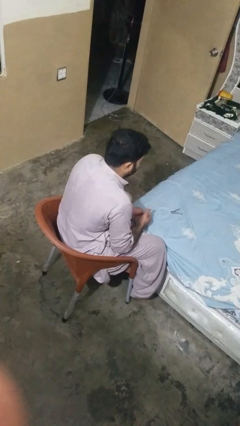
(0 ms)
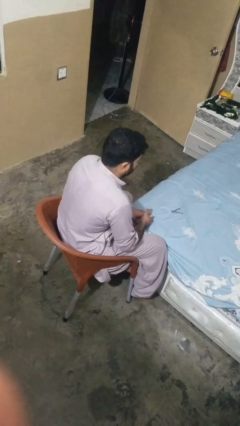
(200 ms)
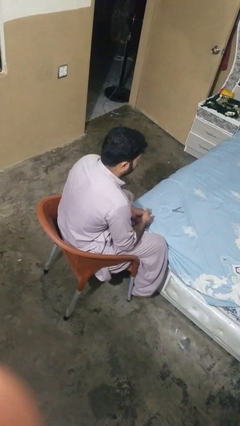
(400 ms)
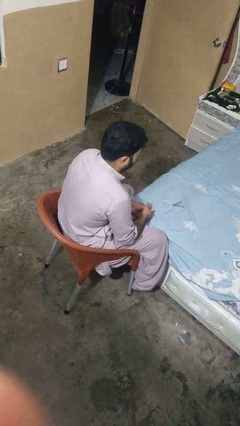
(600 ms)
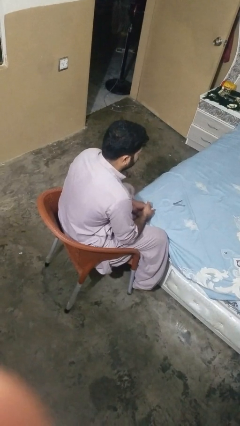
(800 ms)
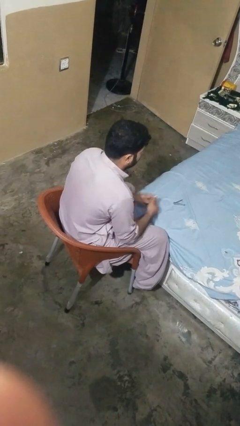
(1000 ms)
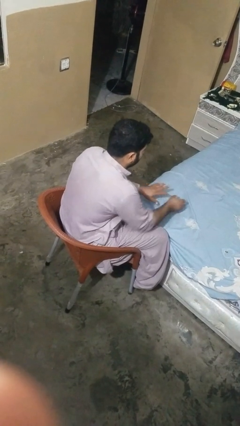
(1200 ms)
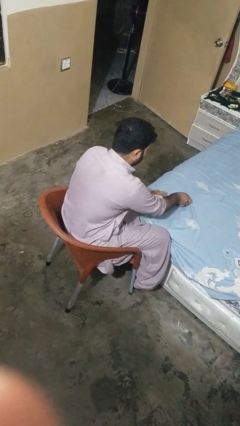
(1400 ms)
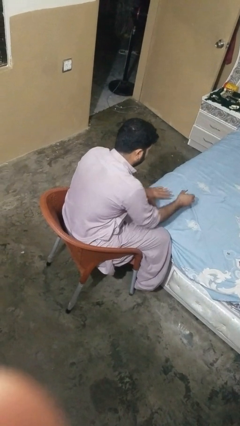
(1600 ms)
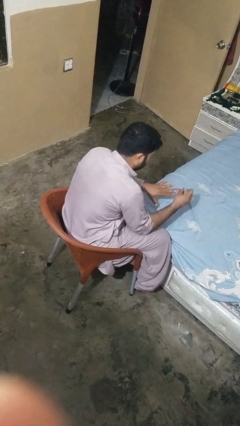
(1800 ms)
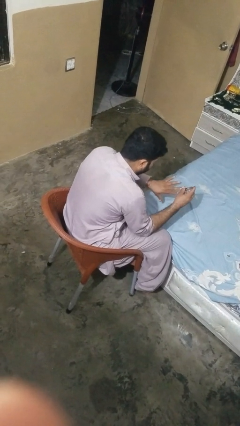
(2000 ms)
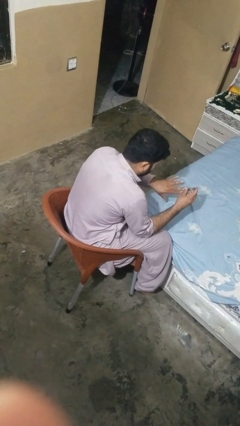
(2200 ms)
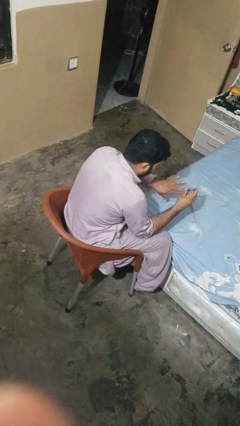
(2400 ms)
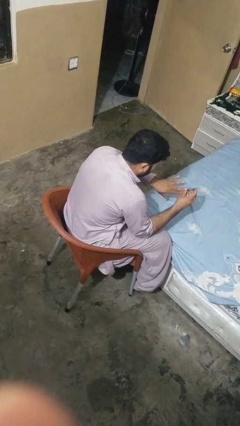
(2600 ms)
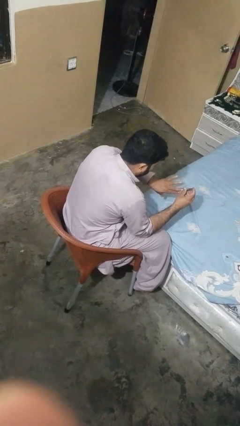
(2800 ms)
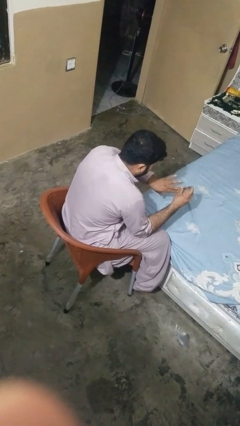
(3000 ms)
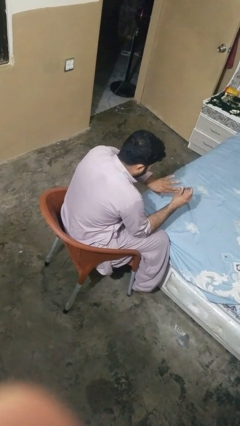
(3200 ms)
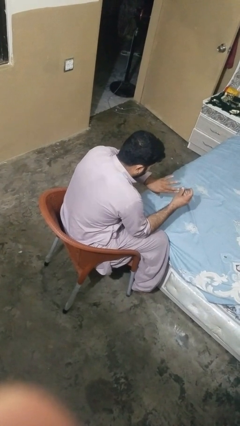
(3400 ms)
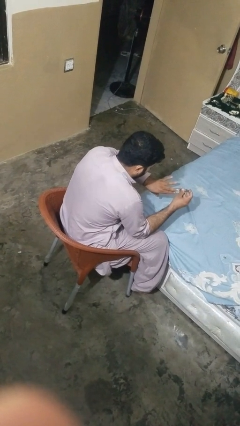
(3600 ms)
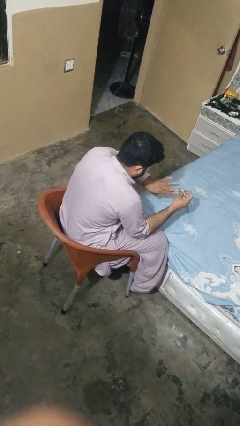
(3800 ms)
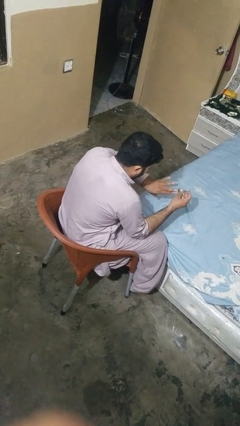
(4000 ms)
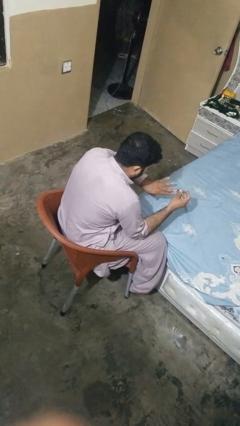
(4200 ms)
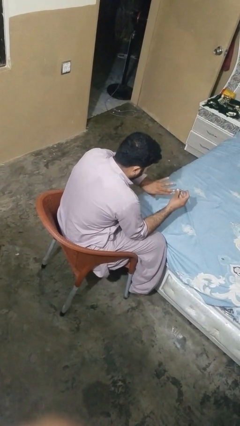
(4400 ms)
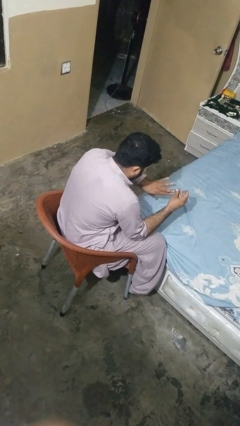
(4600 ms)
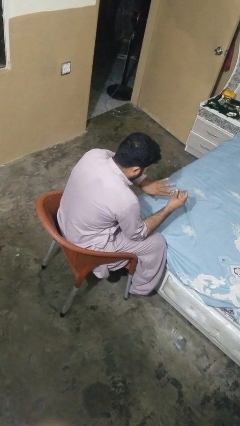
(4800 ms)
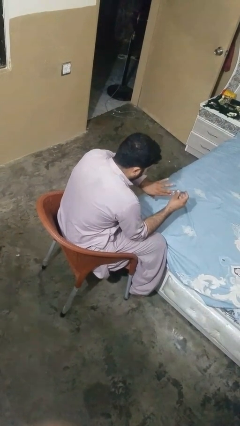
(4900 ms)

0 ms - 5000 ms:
person clips fingernails

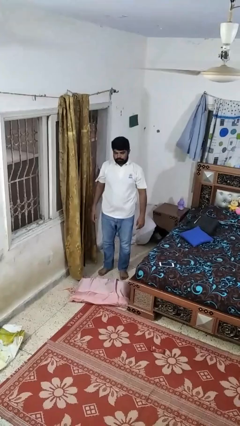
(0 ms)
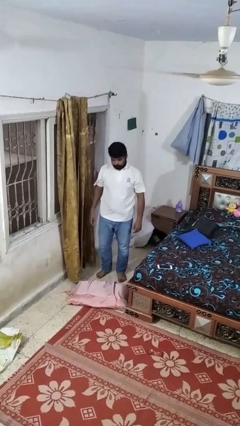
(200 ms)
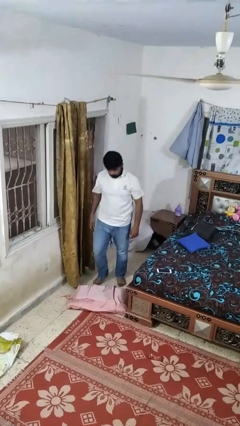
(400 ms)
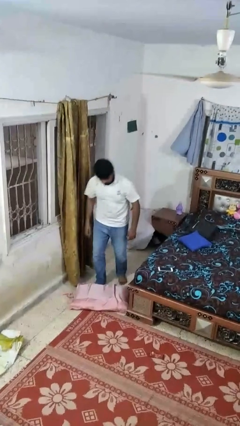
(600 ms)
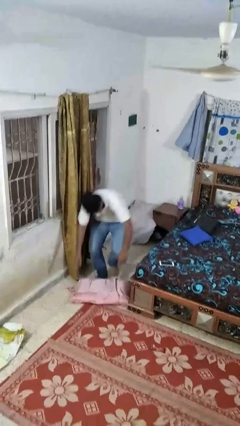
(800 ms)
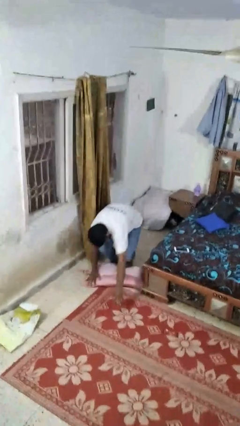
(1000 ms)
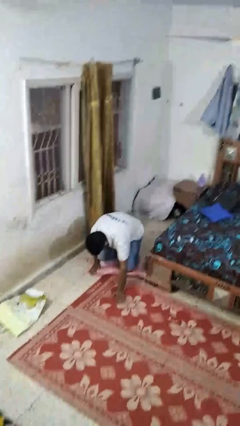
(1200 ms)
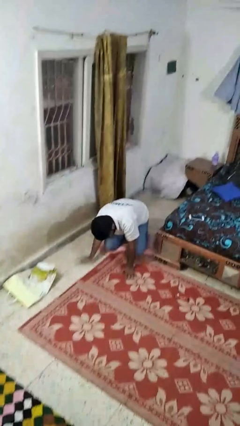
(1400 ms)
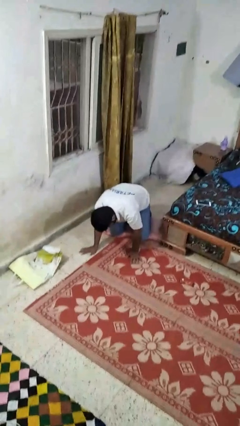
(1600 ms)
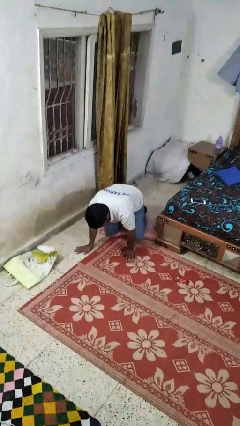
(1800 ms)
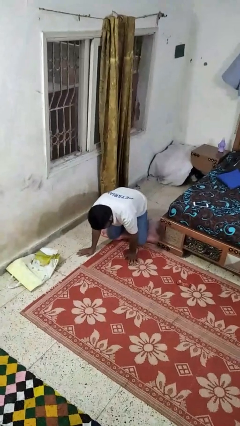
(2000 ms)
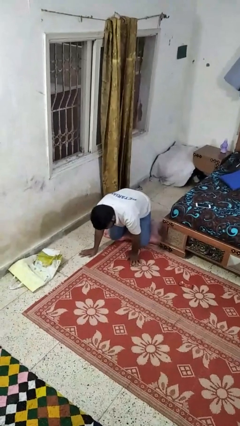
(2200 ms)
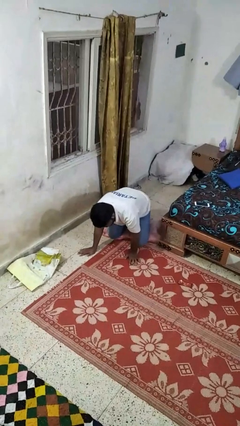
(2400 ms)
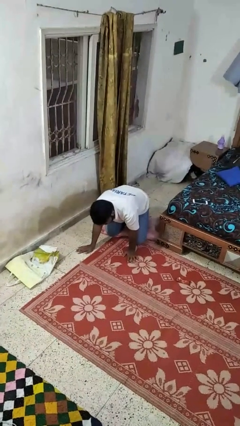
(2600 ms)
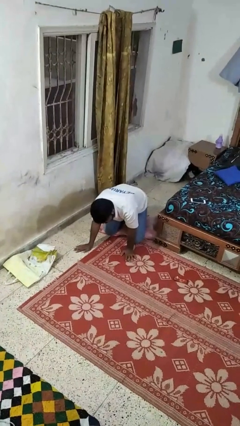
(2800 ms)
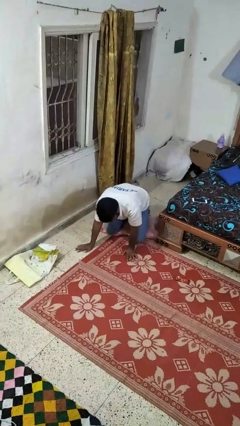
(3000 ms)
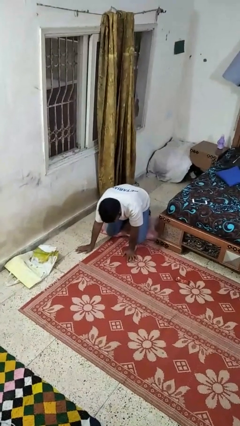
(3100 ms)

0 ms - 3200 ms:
person trips on object on floor

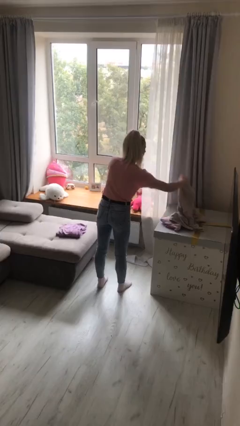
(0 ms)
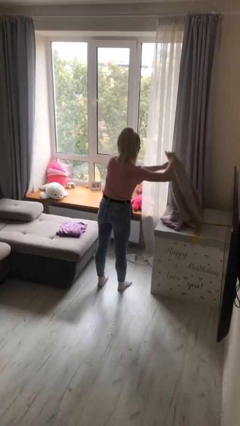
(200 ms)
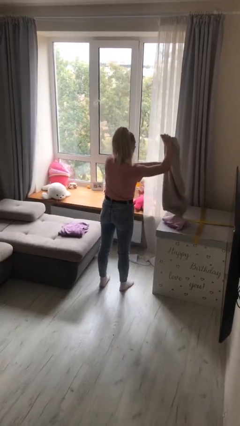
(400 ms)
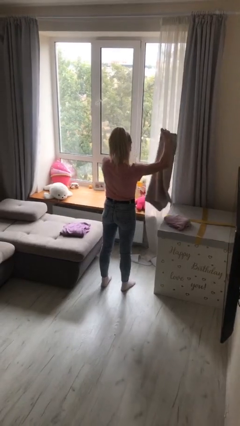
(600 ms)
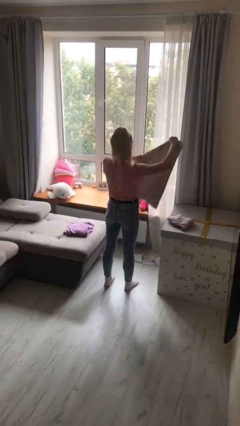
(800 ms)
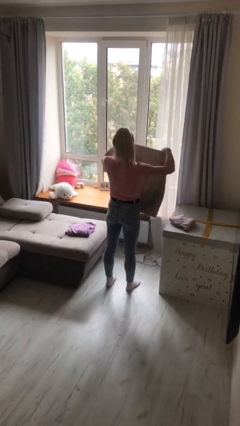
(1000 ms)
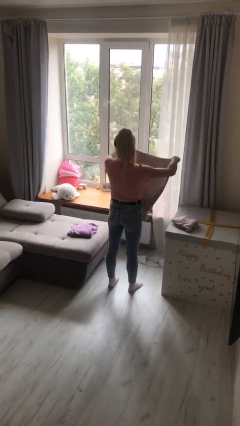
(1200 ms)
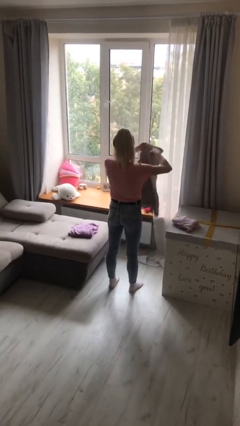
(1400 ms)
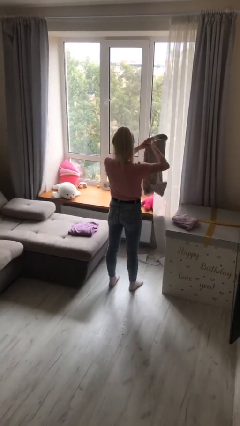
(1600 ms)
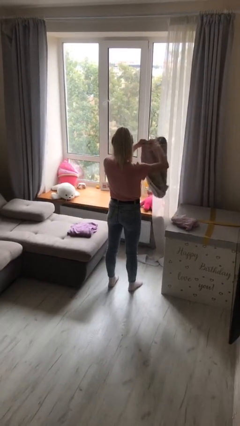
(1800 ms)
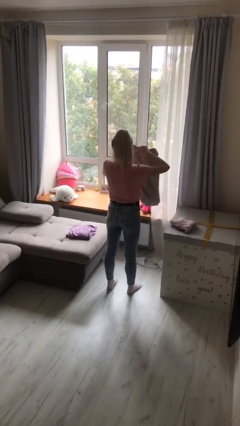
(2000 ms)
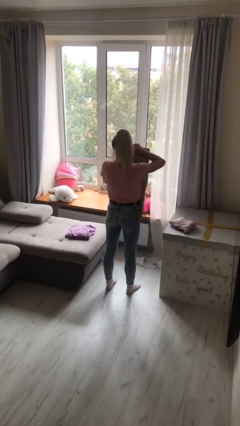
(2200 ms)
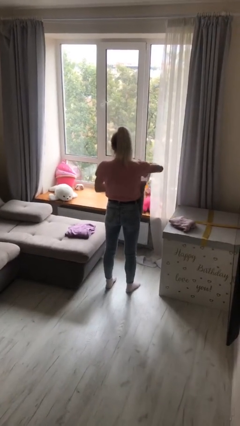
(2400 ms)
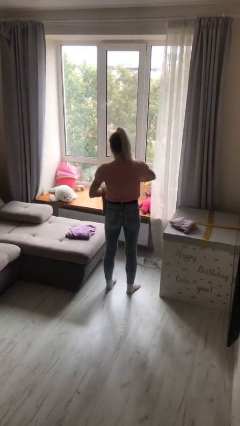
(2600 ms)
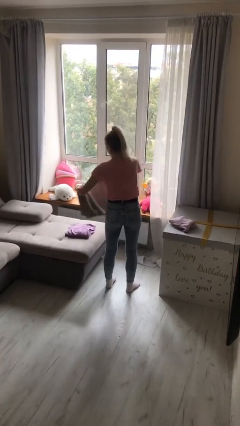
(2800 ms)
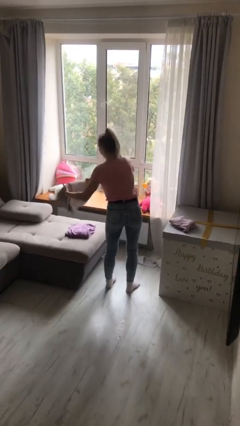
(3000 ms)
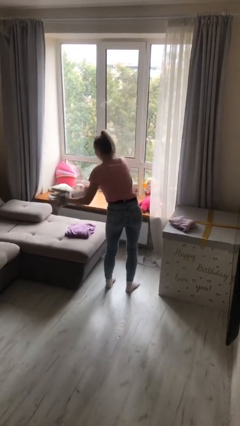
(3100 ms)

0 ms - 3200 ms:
person folds towel

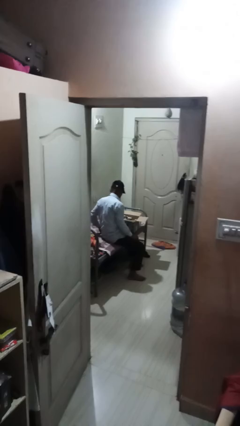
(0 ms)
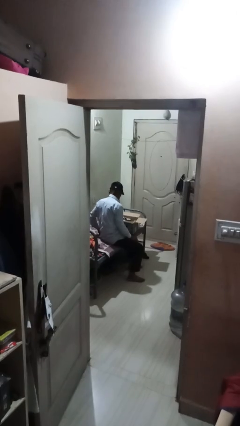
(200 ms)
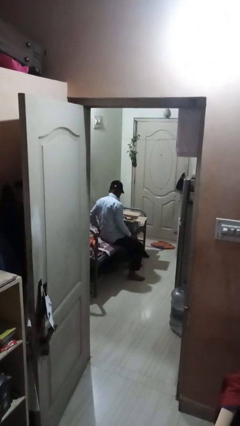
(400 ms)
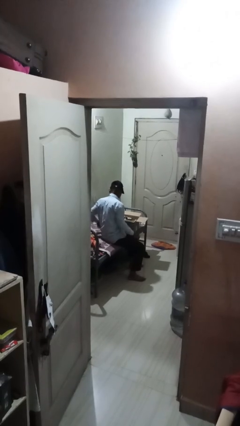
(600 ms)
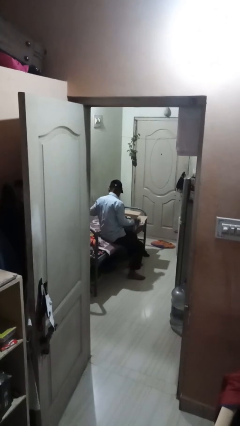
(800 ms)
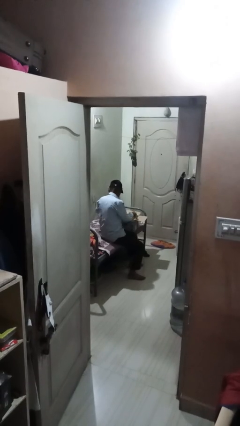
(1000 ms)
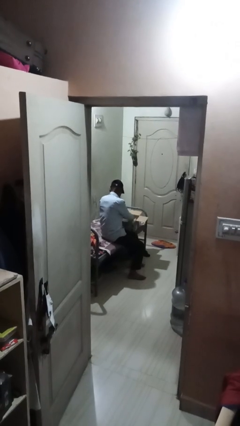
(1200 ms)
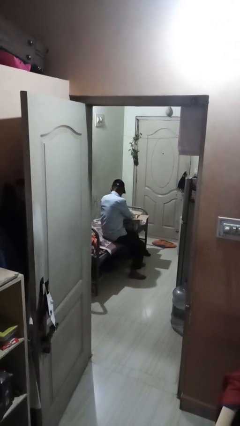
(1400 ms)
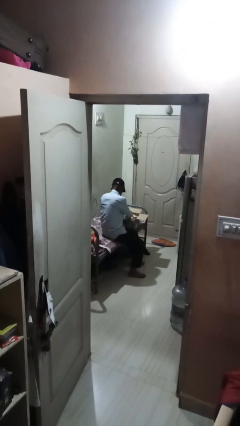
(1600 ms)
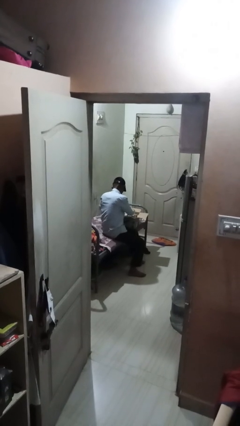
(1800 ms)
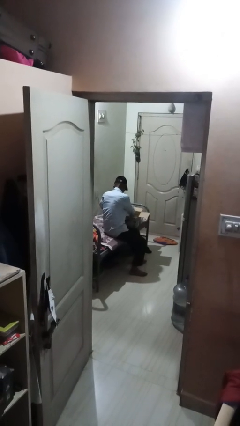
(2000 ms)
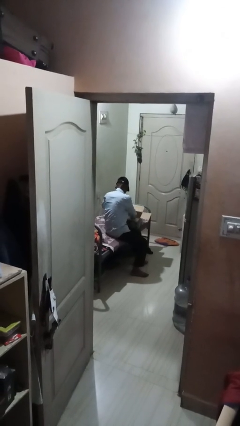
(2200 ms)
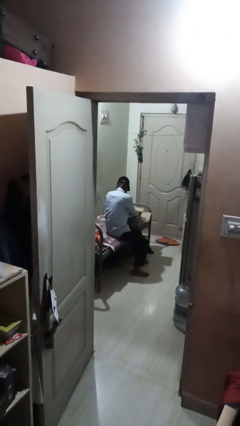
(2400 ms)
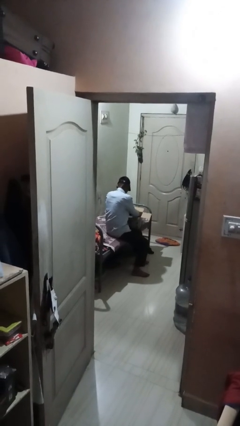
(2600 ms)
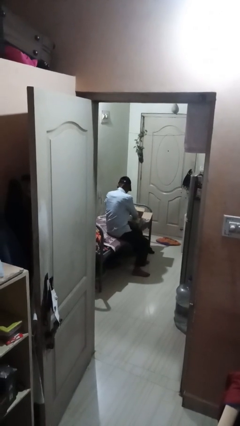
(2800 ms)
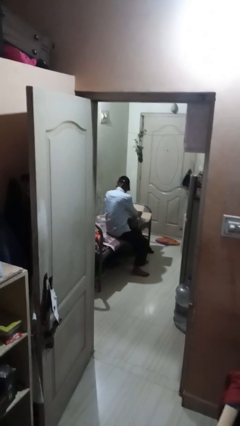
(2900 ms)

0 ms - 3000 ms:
person searches in box

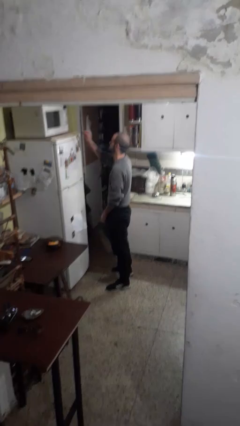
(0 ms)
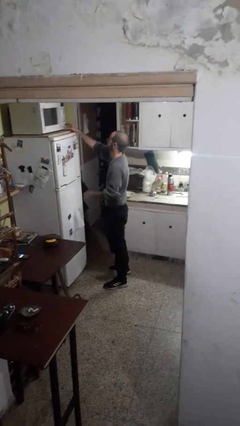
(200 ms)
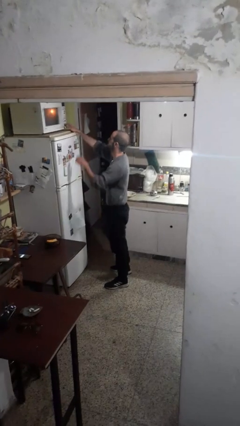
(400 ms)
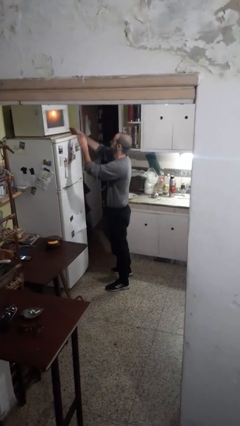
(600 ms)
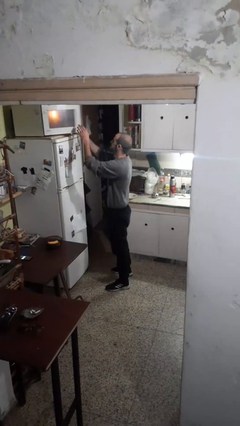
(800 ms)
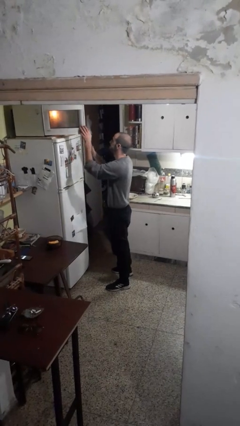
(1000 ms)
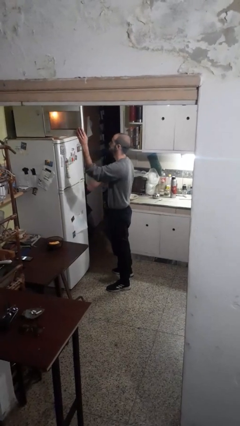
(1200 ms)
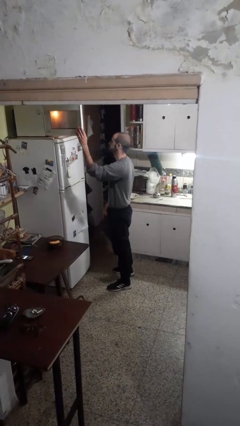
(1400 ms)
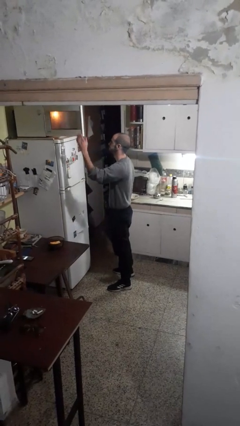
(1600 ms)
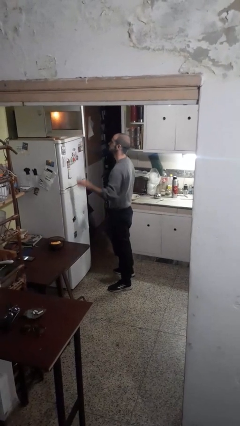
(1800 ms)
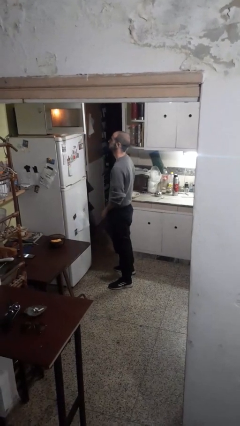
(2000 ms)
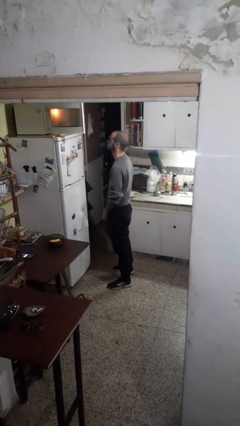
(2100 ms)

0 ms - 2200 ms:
person opens microwave

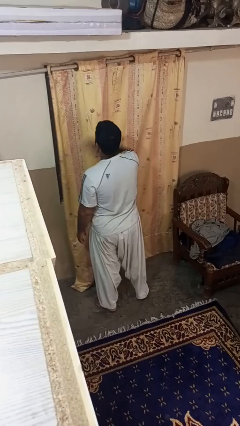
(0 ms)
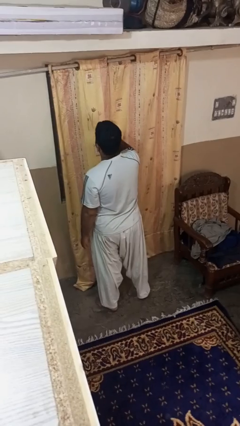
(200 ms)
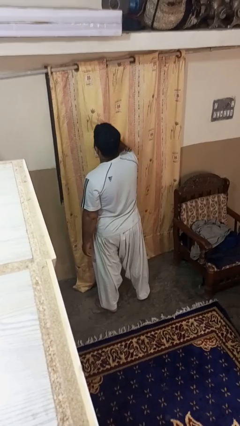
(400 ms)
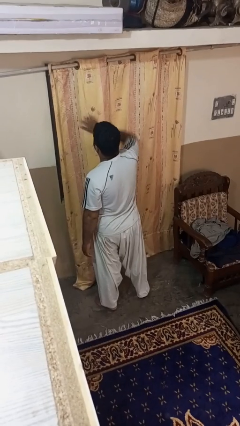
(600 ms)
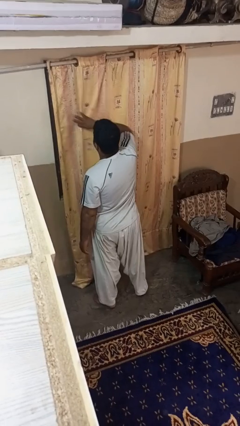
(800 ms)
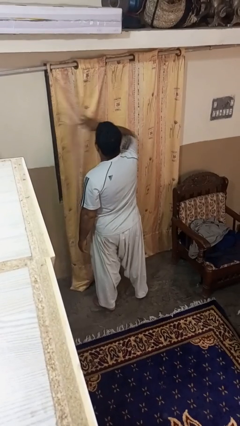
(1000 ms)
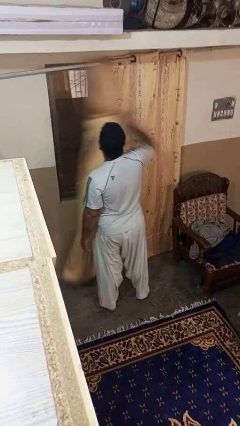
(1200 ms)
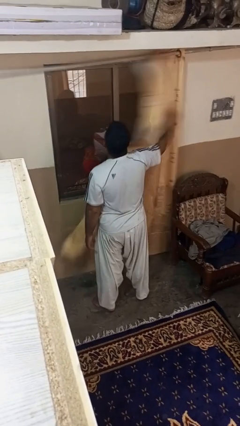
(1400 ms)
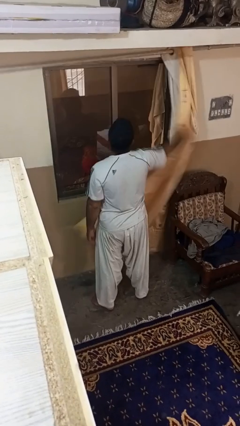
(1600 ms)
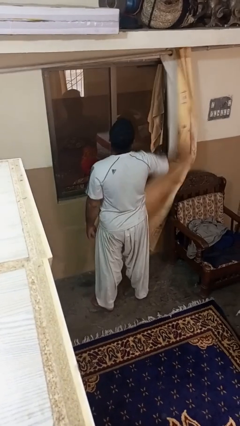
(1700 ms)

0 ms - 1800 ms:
person opens curtains
